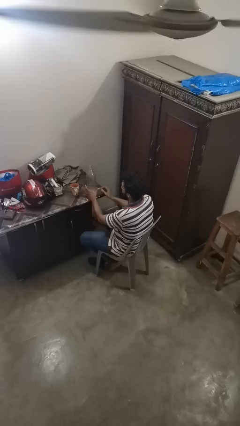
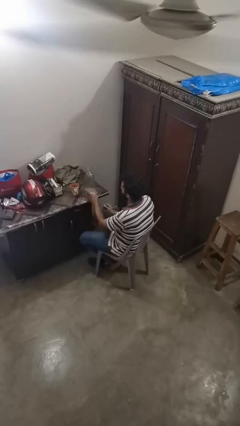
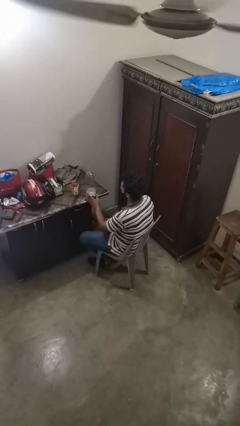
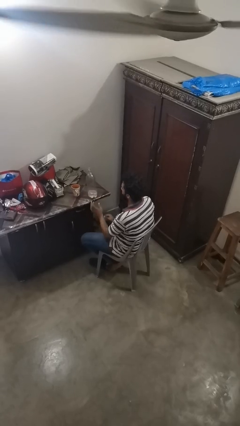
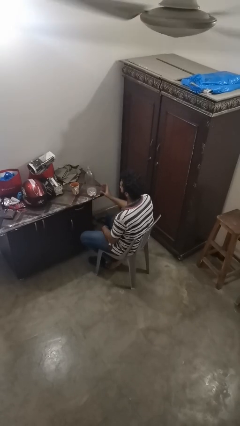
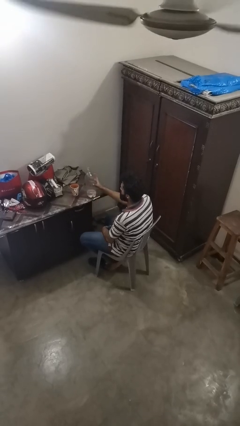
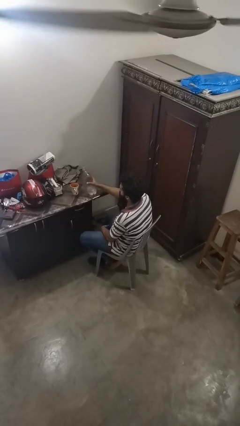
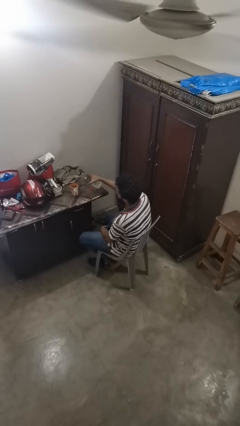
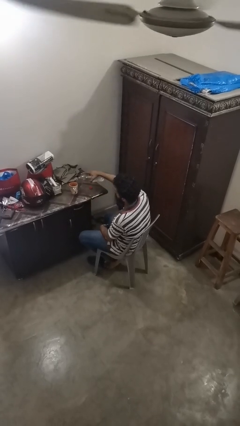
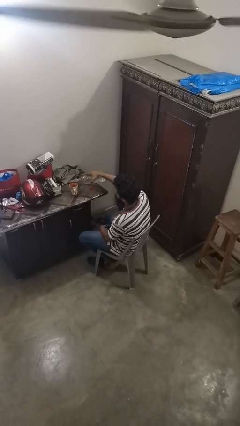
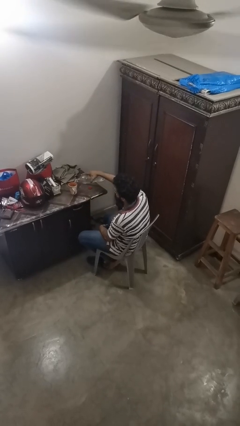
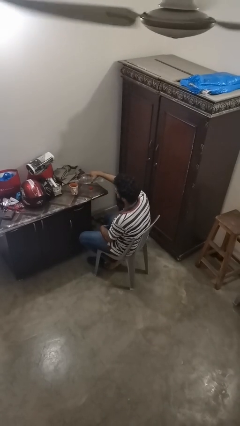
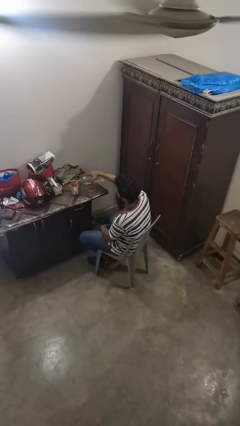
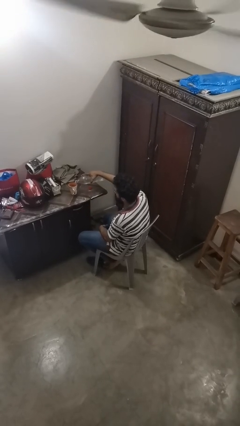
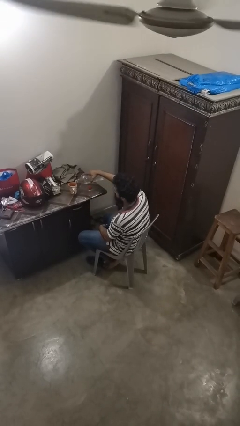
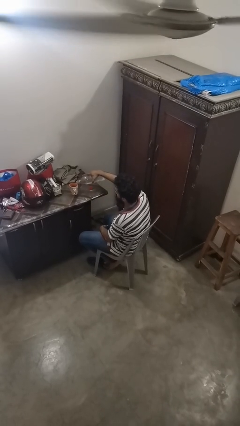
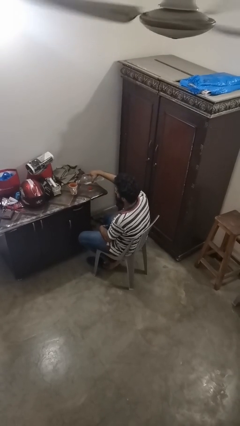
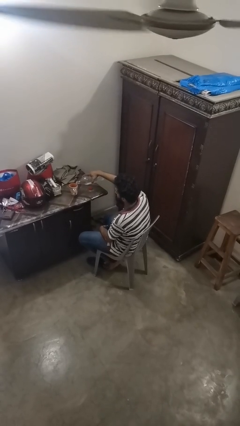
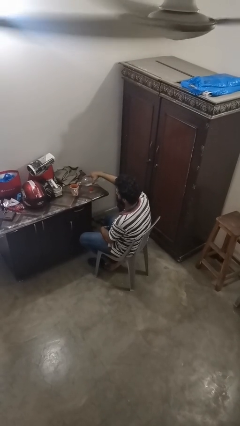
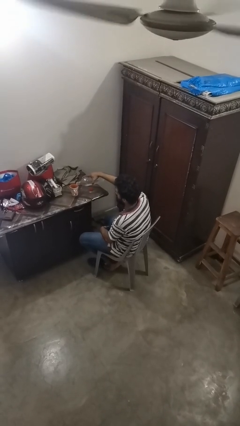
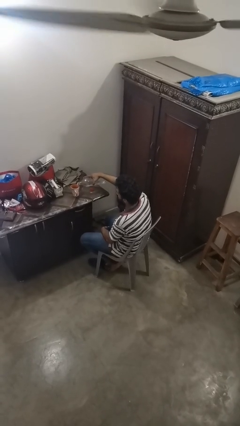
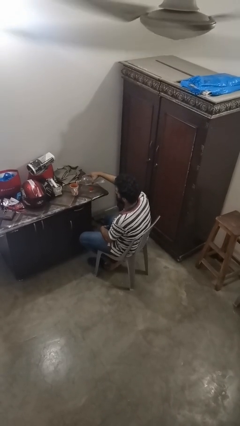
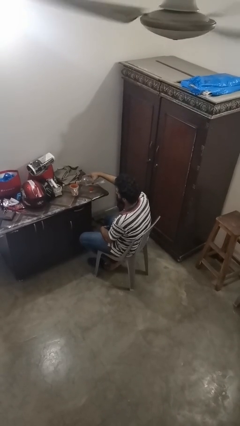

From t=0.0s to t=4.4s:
person pours liquid into cup

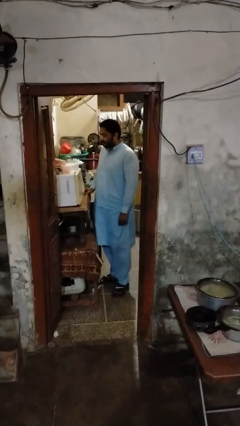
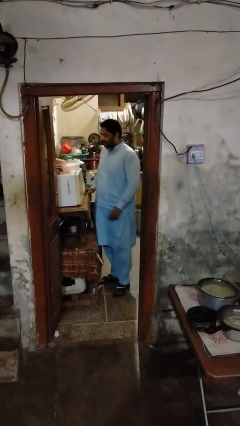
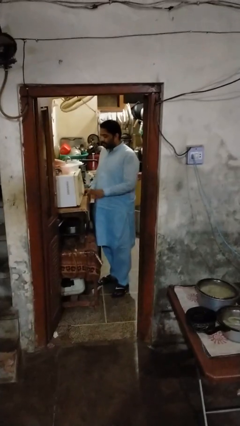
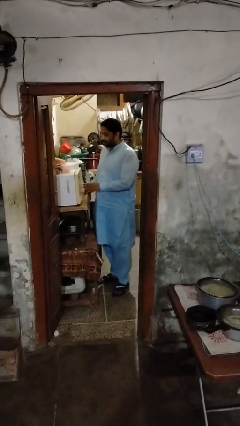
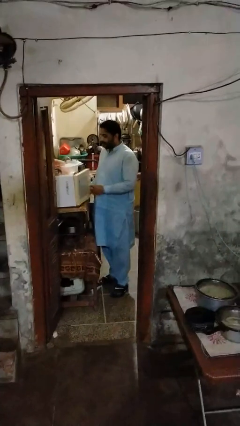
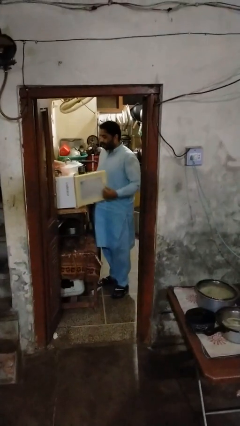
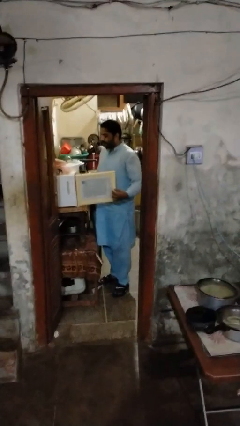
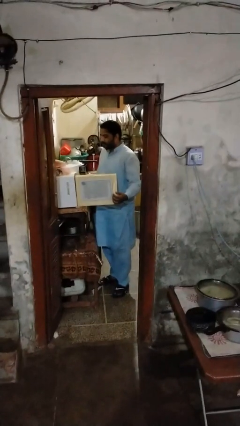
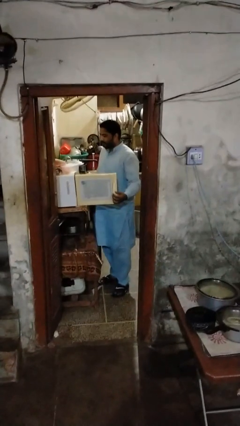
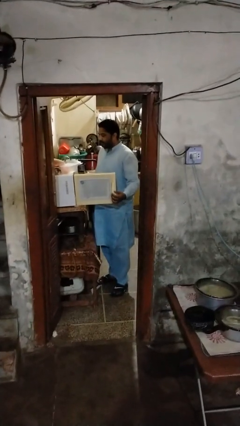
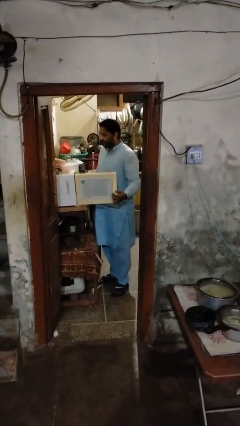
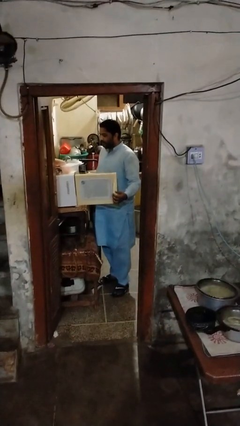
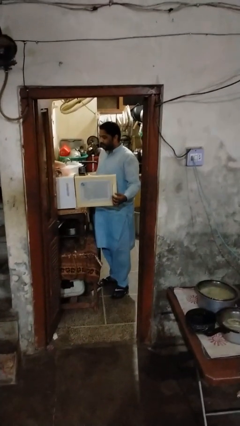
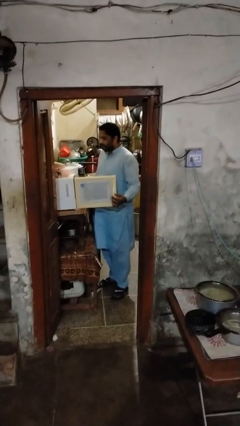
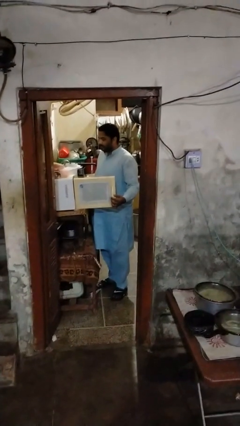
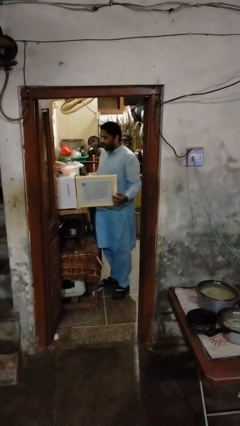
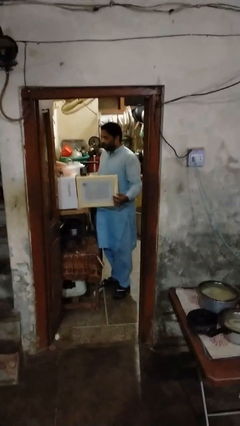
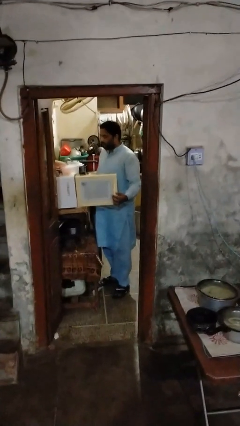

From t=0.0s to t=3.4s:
person lies down on bed

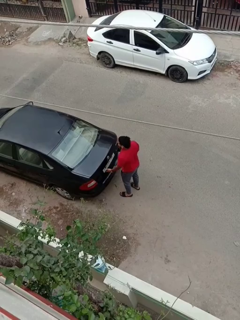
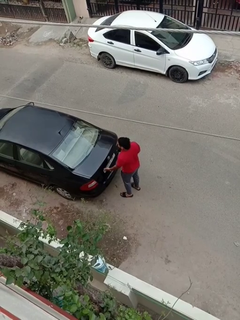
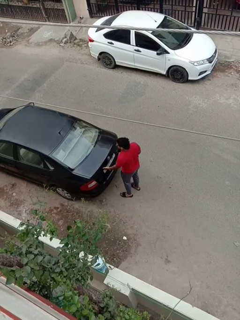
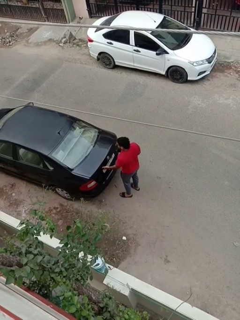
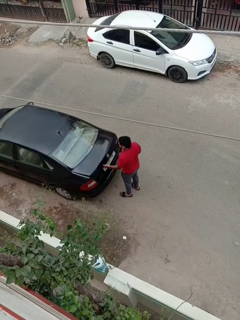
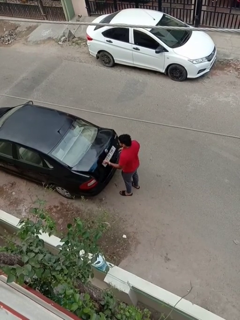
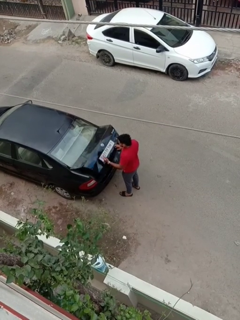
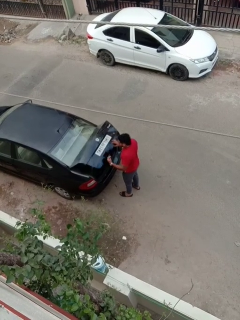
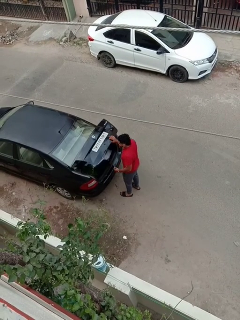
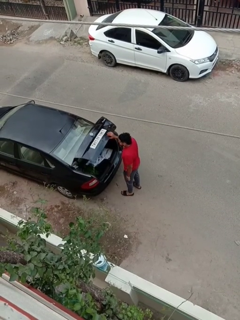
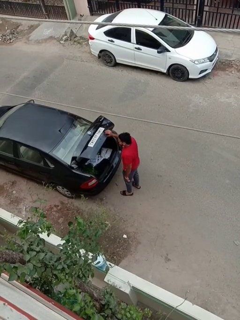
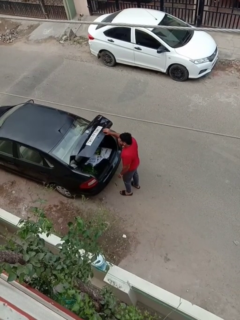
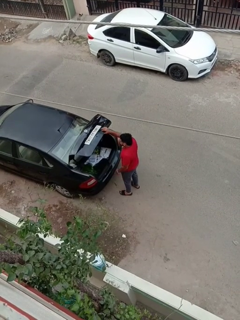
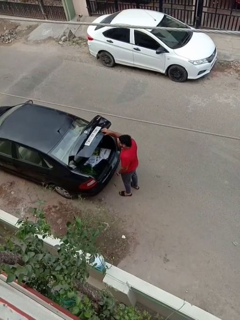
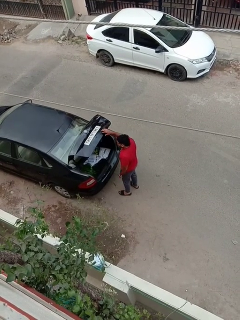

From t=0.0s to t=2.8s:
person opens car trunk

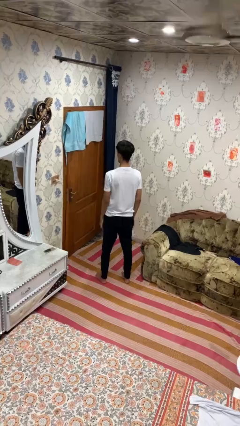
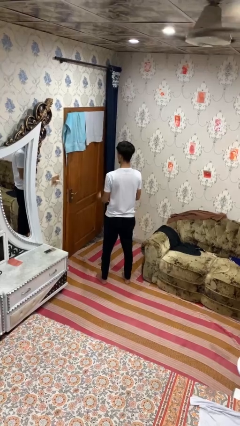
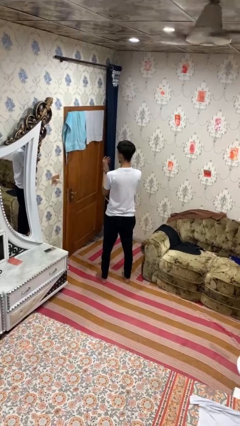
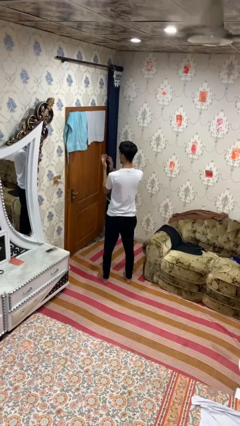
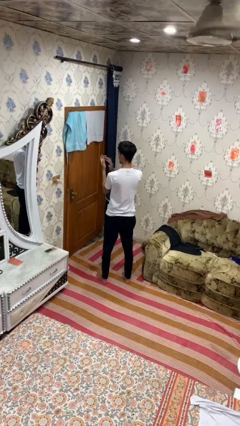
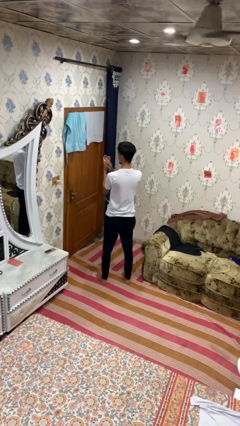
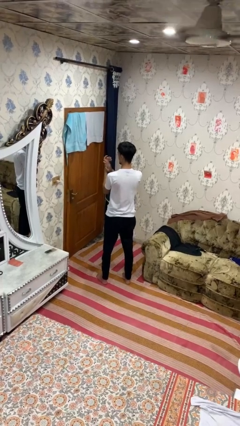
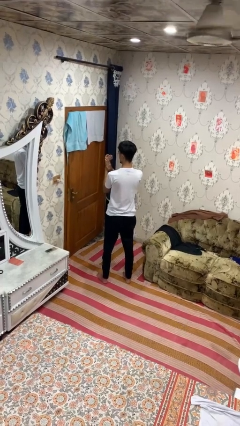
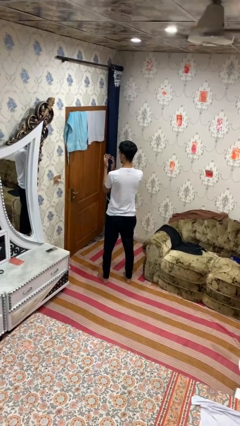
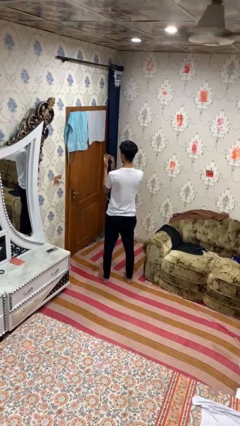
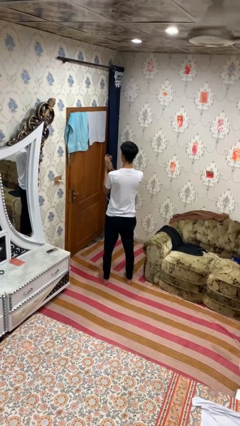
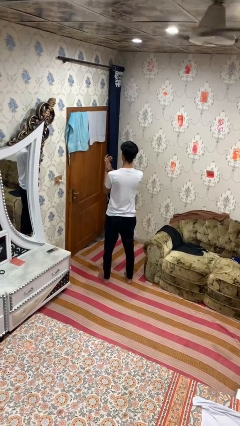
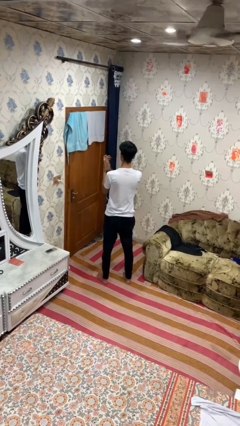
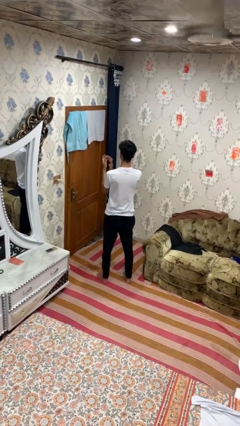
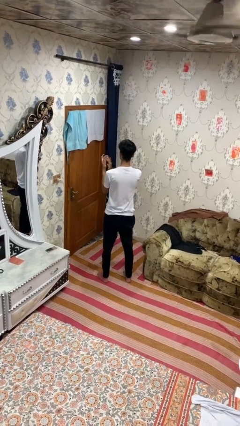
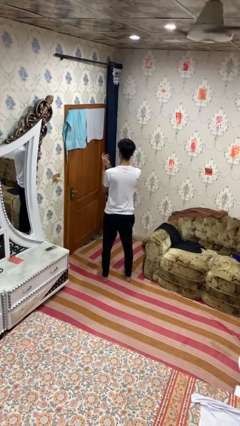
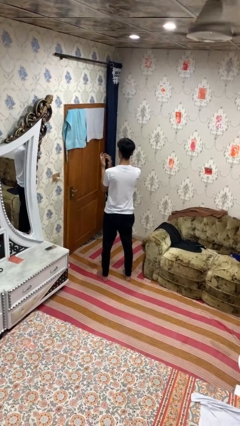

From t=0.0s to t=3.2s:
person claps hands

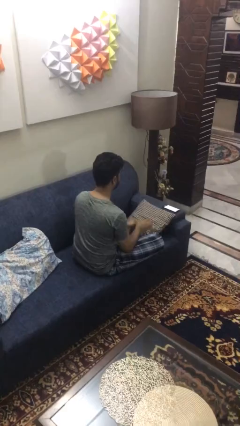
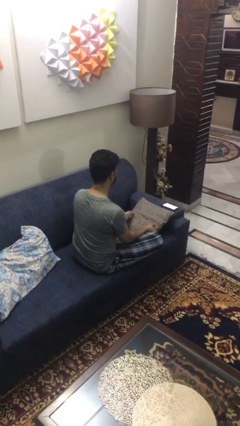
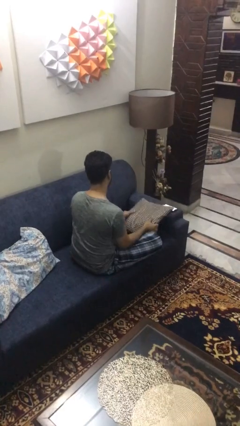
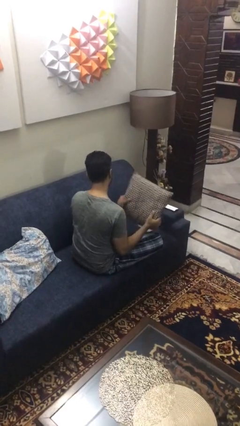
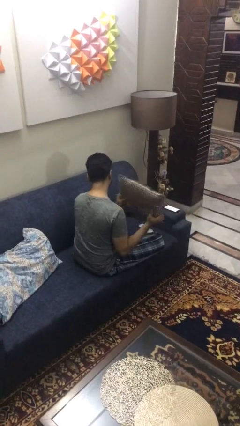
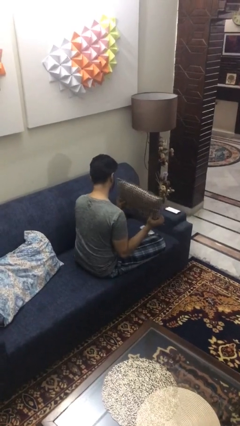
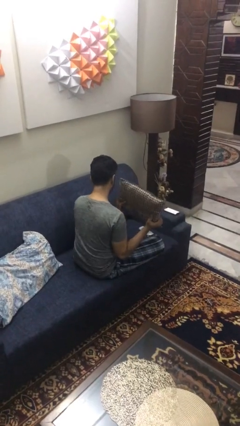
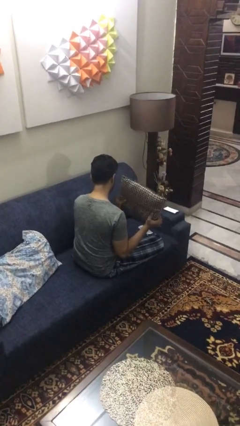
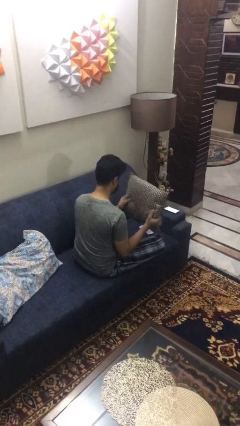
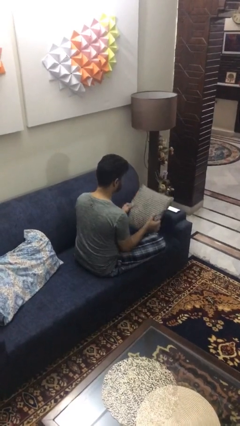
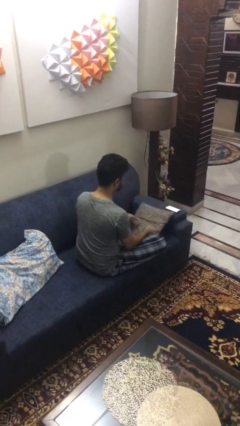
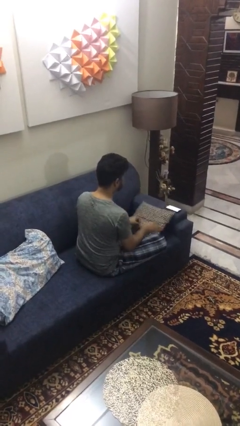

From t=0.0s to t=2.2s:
person searches in couch

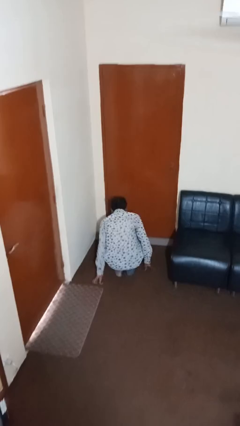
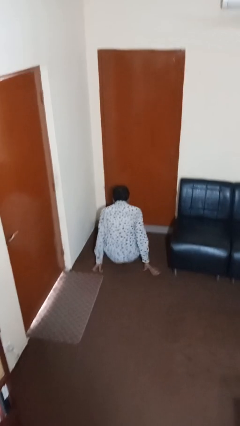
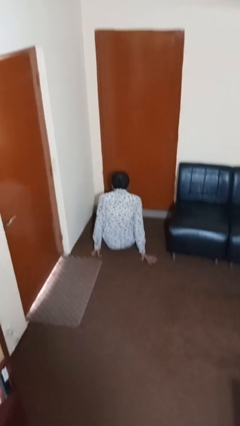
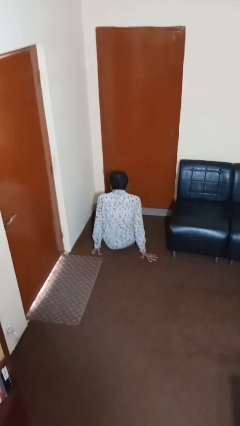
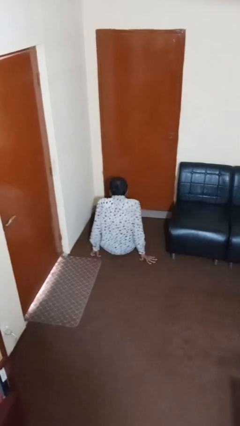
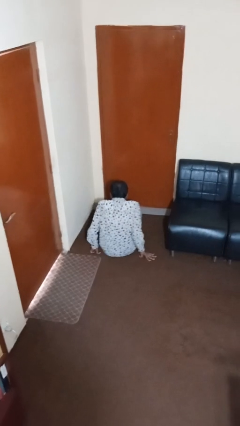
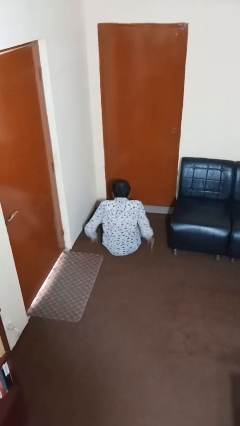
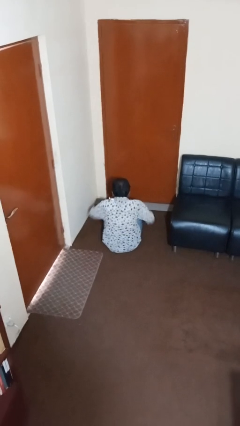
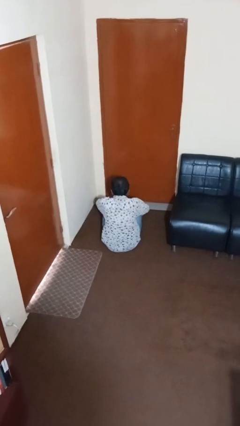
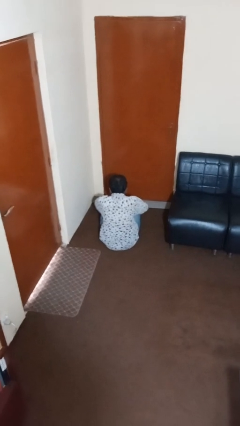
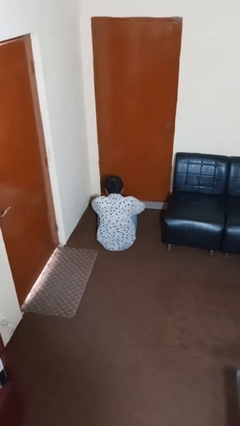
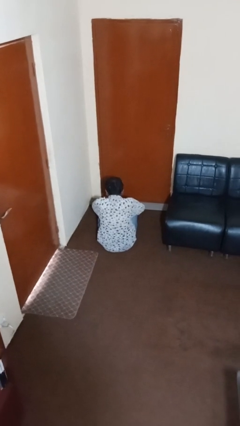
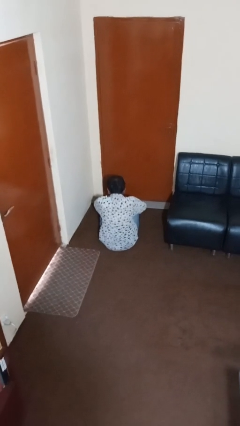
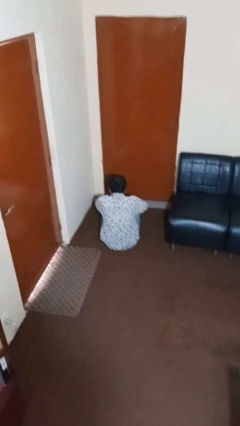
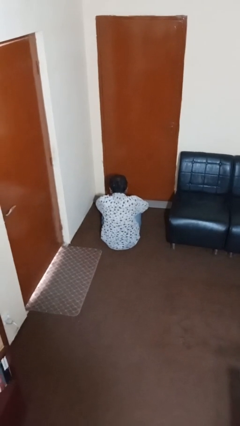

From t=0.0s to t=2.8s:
person sits crisscross
